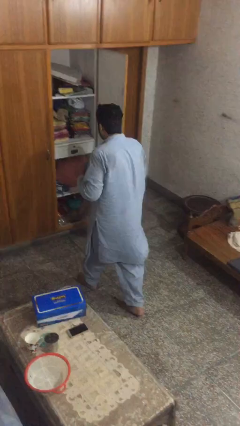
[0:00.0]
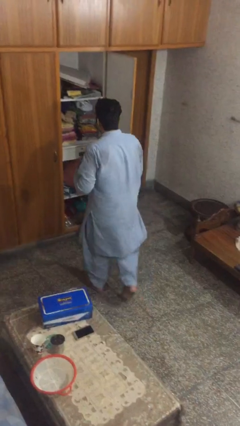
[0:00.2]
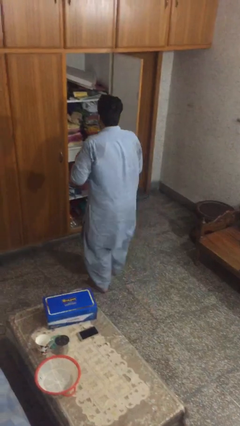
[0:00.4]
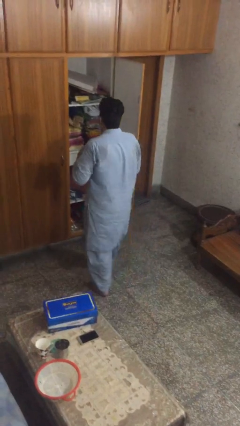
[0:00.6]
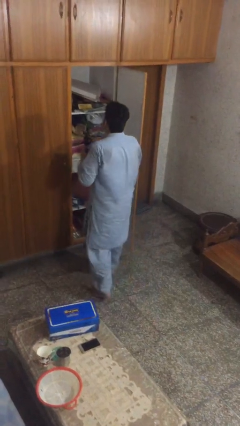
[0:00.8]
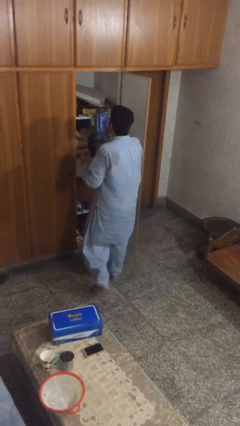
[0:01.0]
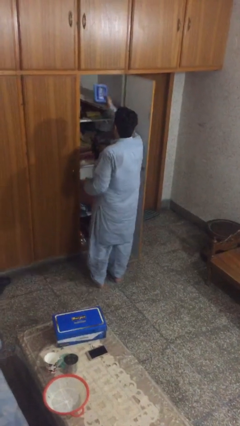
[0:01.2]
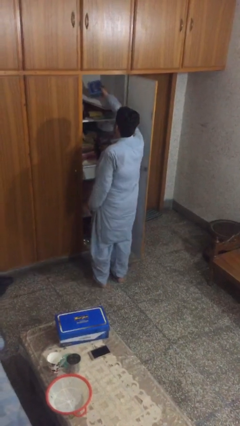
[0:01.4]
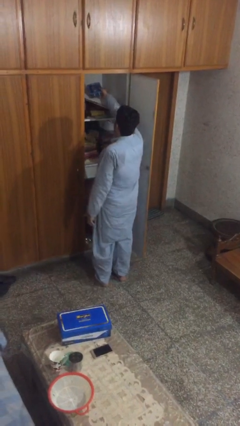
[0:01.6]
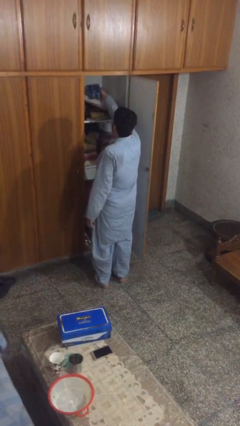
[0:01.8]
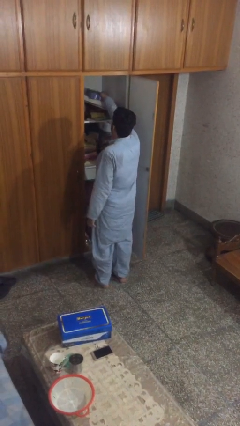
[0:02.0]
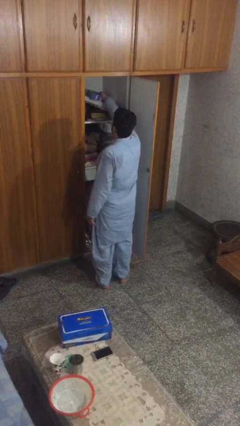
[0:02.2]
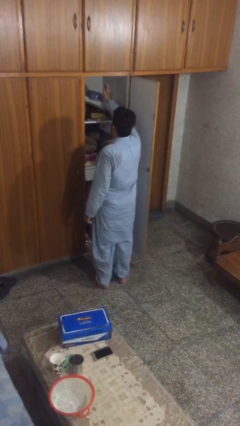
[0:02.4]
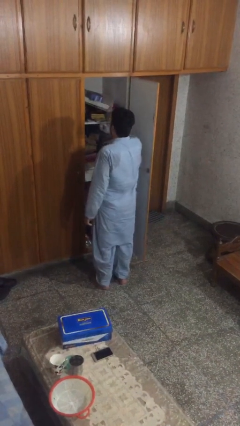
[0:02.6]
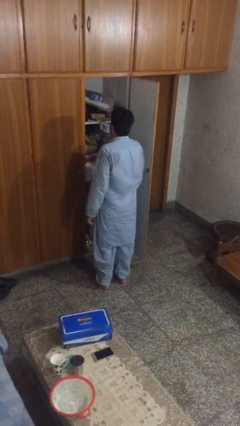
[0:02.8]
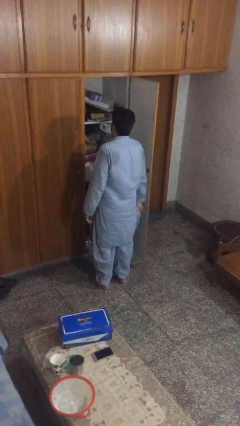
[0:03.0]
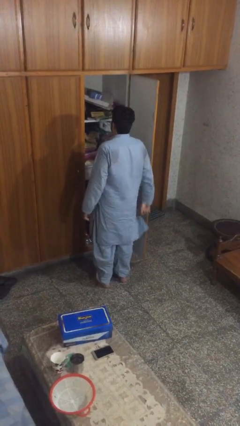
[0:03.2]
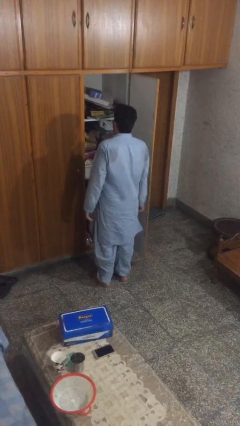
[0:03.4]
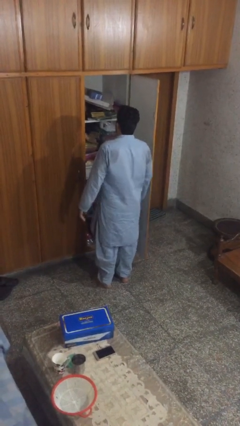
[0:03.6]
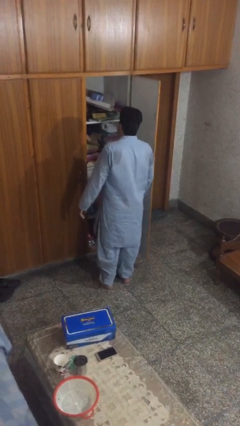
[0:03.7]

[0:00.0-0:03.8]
person puts down object on shelf

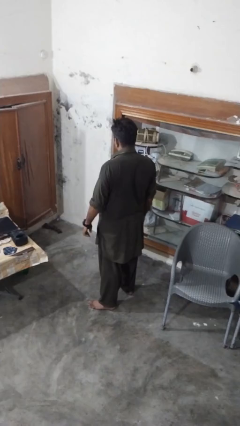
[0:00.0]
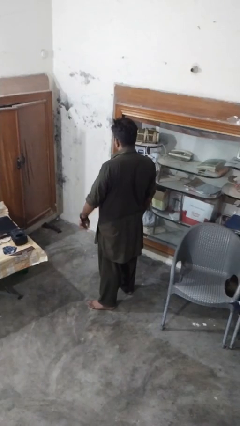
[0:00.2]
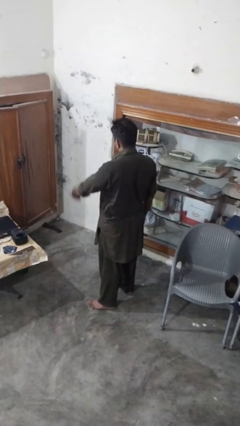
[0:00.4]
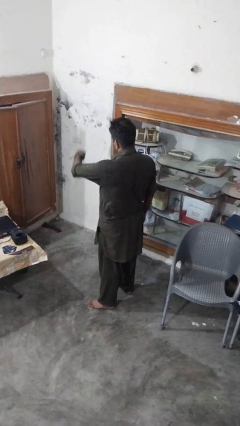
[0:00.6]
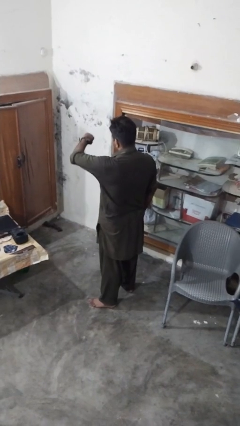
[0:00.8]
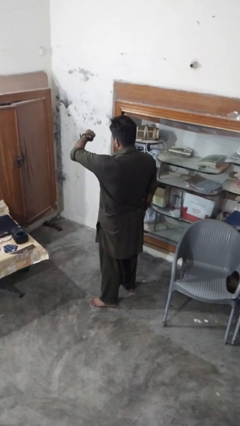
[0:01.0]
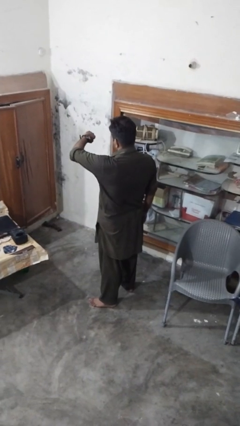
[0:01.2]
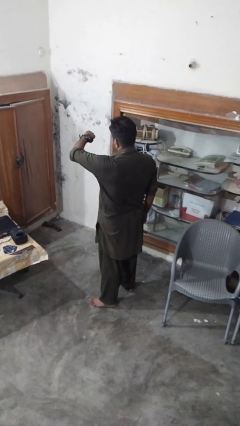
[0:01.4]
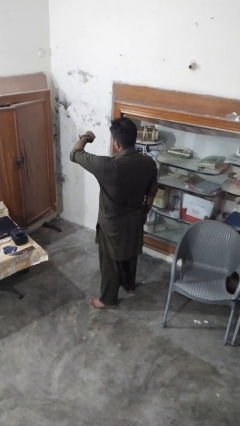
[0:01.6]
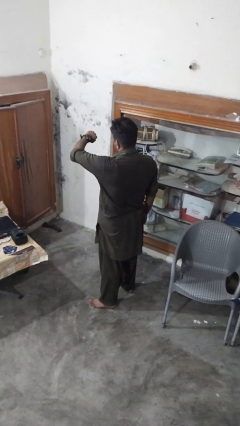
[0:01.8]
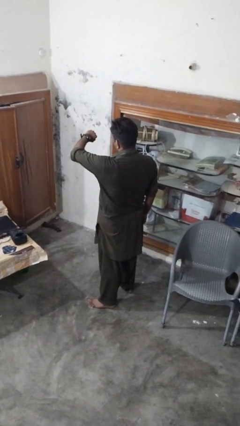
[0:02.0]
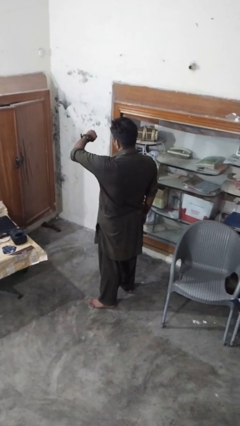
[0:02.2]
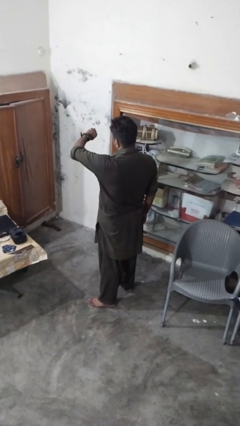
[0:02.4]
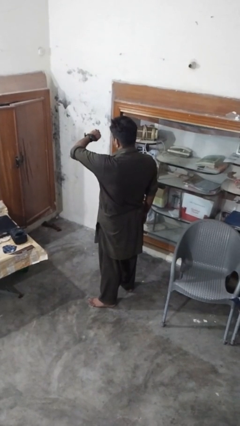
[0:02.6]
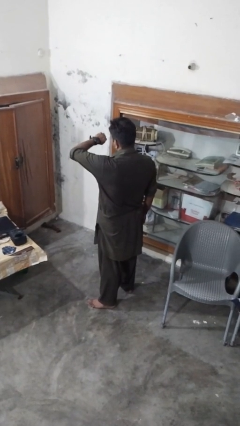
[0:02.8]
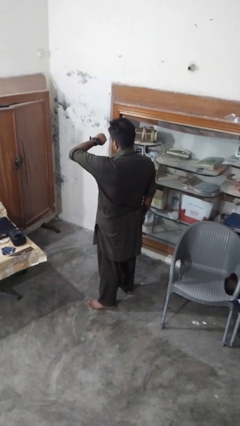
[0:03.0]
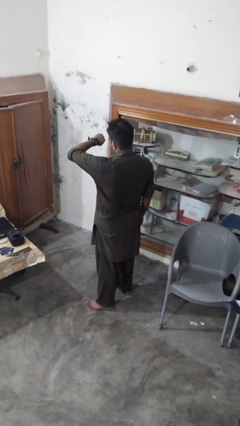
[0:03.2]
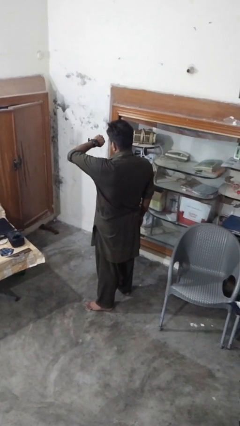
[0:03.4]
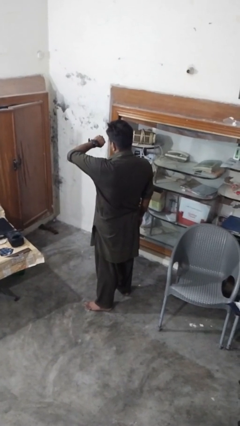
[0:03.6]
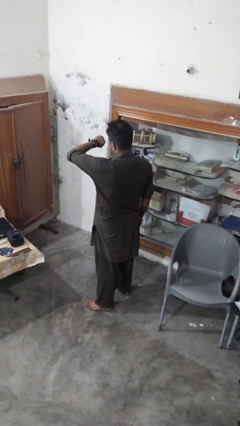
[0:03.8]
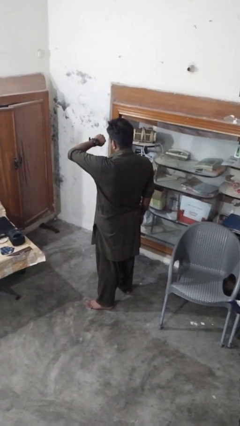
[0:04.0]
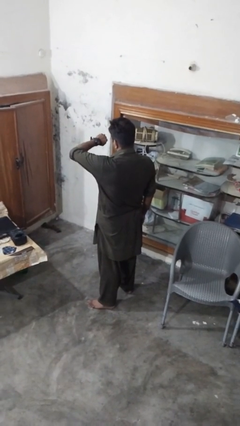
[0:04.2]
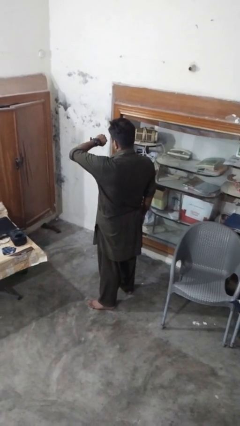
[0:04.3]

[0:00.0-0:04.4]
person looks at wristwatch

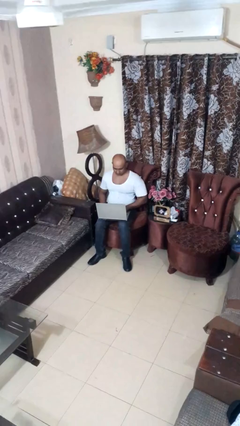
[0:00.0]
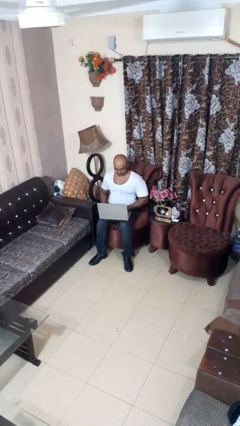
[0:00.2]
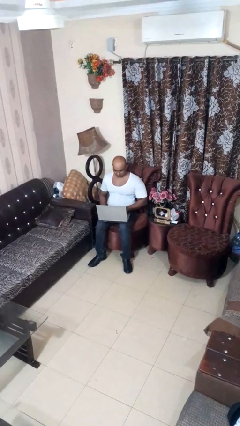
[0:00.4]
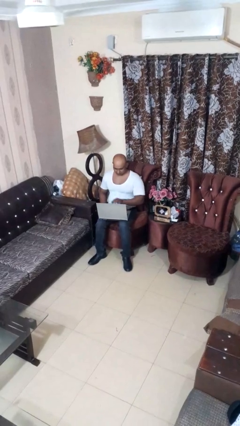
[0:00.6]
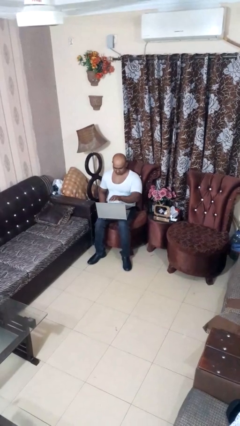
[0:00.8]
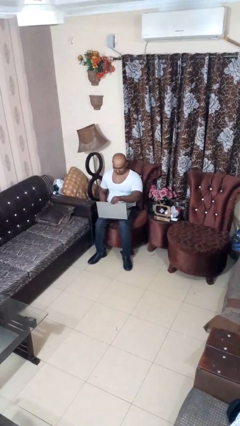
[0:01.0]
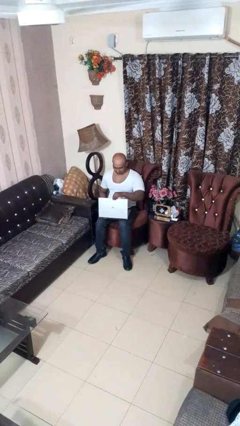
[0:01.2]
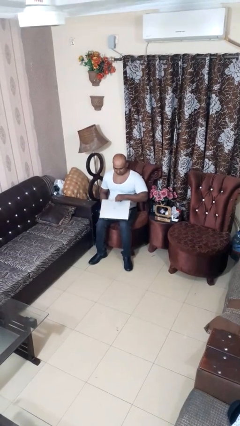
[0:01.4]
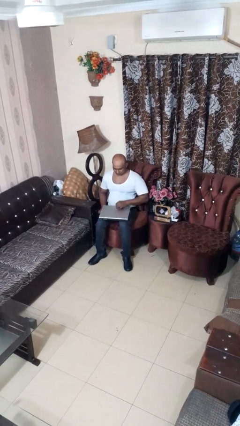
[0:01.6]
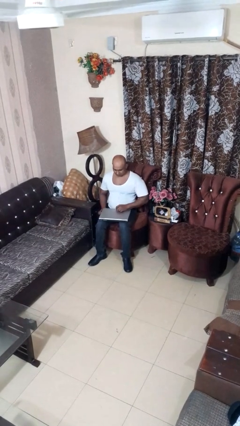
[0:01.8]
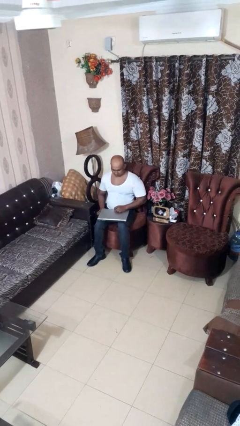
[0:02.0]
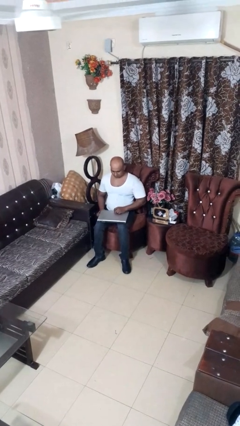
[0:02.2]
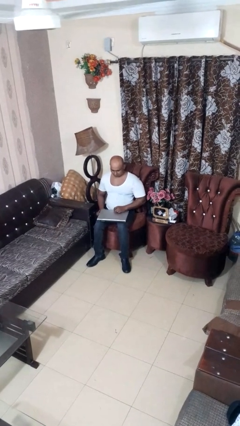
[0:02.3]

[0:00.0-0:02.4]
person closes laptop

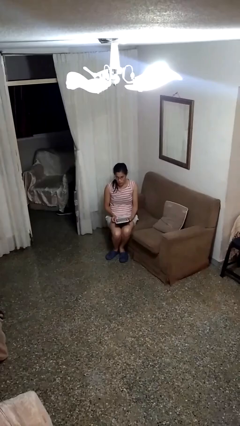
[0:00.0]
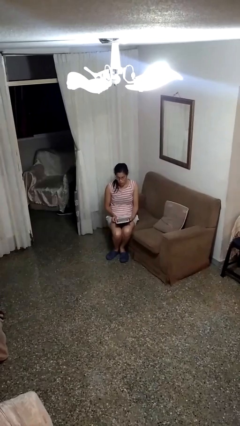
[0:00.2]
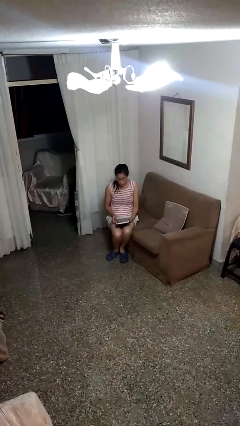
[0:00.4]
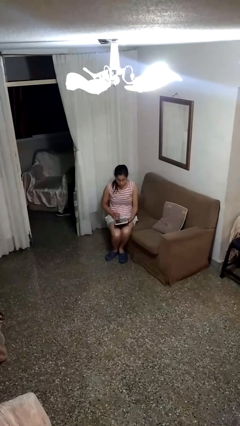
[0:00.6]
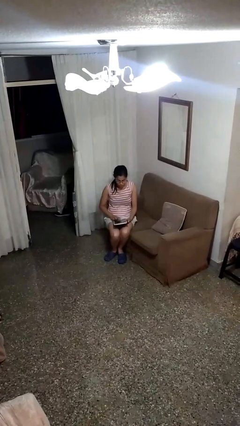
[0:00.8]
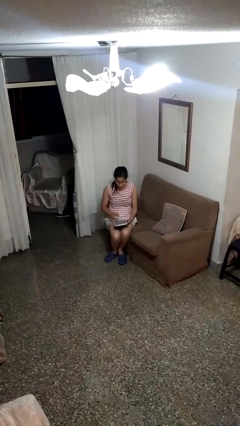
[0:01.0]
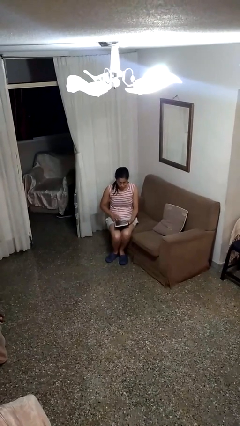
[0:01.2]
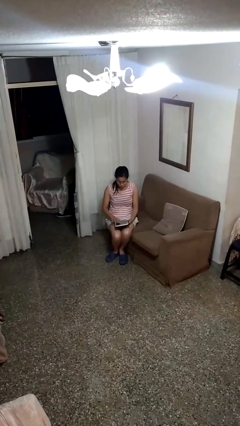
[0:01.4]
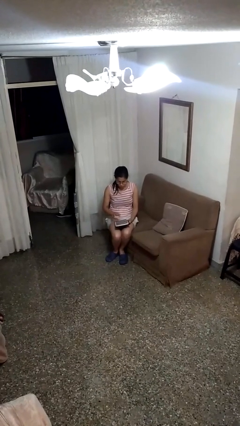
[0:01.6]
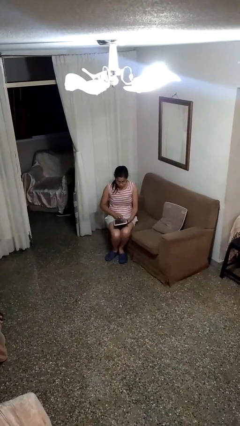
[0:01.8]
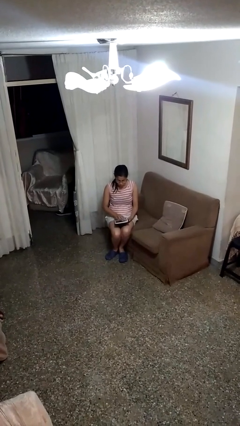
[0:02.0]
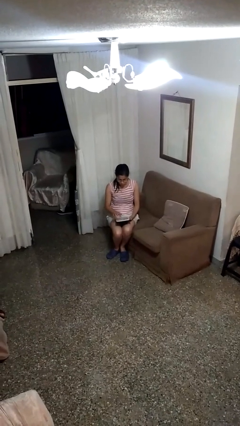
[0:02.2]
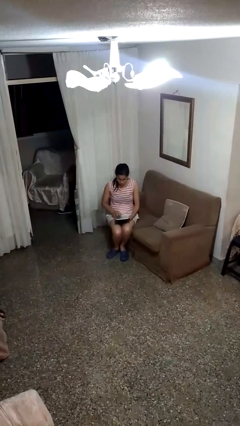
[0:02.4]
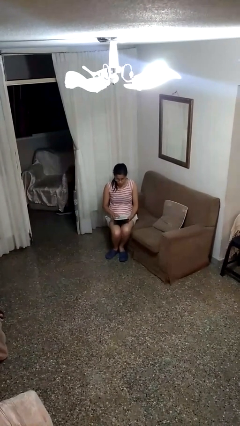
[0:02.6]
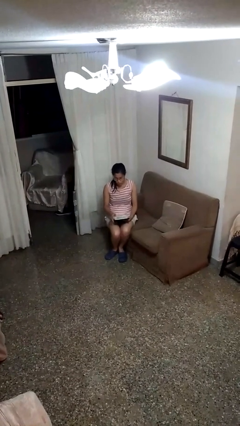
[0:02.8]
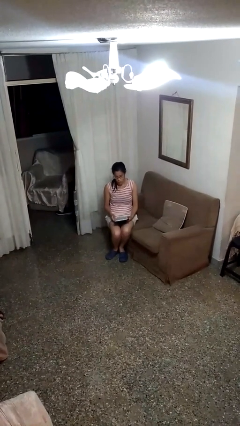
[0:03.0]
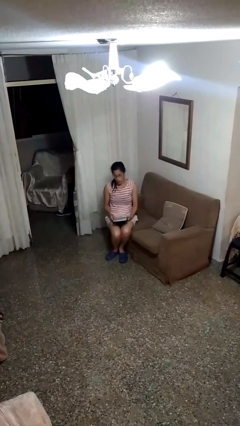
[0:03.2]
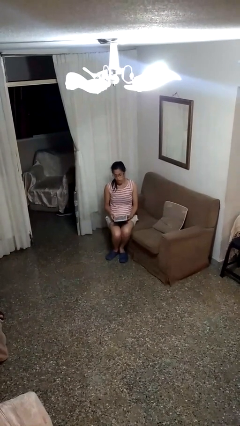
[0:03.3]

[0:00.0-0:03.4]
person interacts with tablet

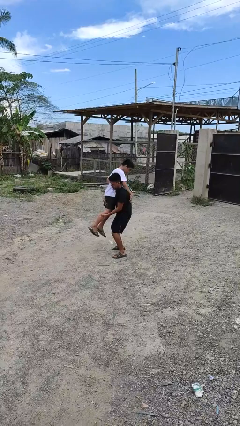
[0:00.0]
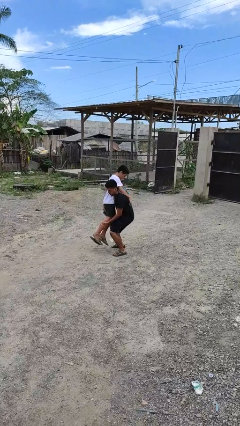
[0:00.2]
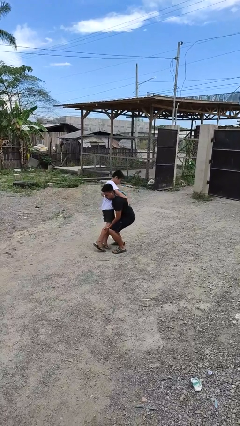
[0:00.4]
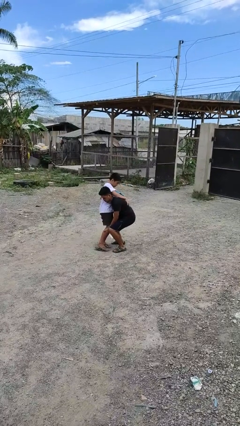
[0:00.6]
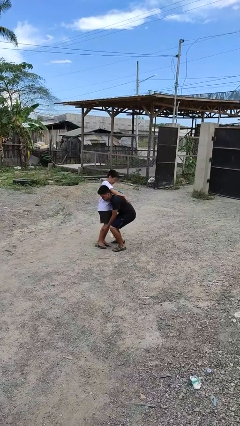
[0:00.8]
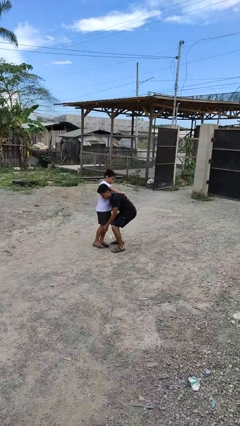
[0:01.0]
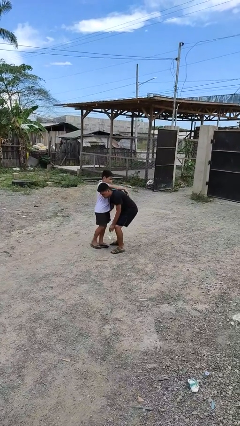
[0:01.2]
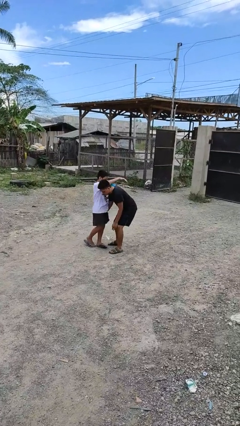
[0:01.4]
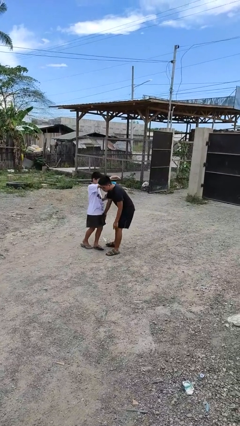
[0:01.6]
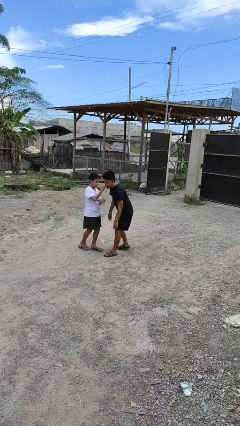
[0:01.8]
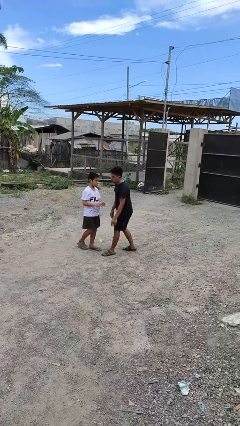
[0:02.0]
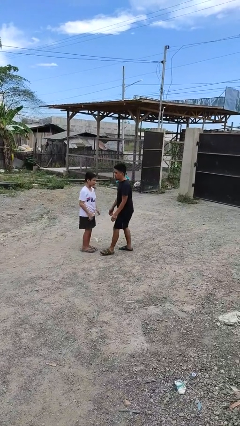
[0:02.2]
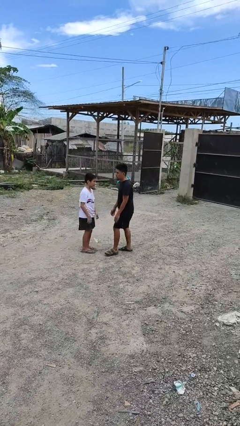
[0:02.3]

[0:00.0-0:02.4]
person puts down person

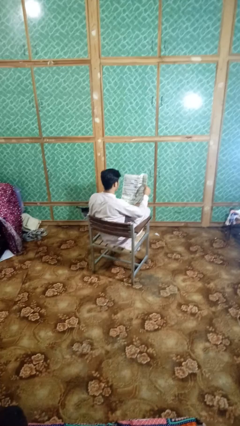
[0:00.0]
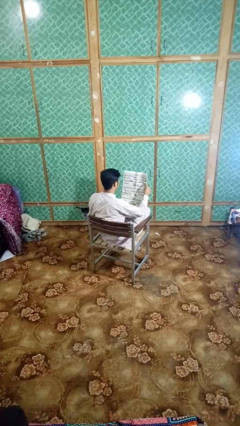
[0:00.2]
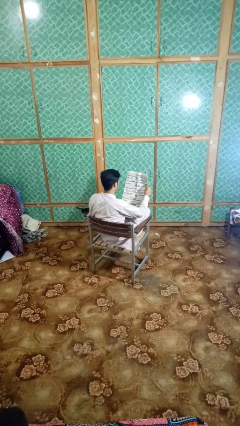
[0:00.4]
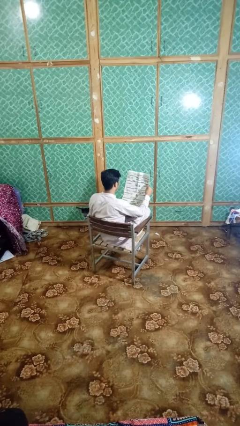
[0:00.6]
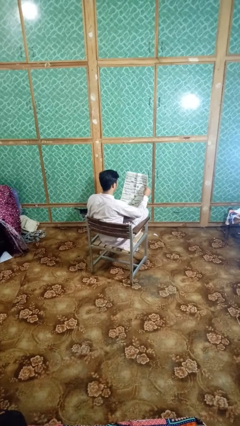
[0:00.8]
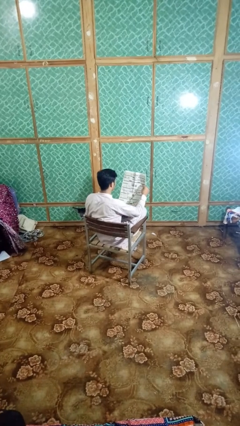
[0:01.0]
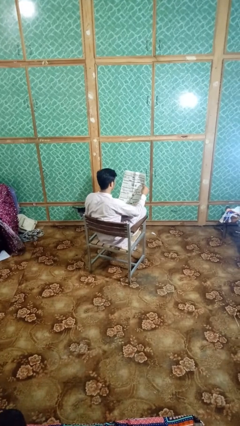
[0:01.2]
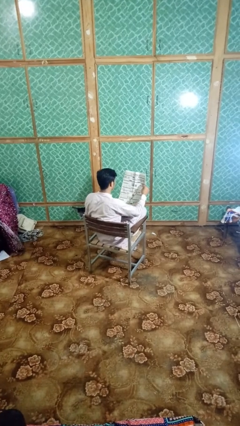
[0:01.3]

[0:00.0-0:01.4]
person reads newspaper
